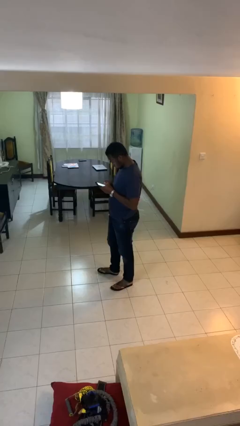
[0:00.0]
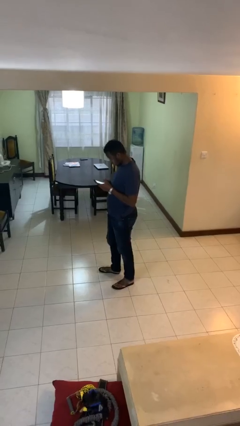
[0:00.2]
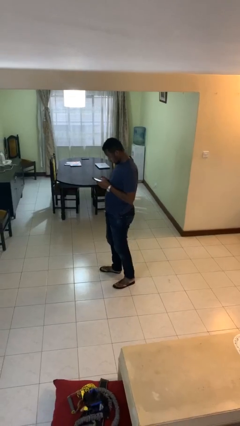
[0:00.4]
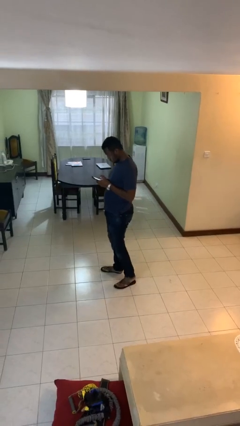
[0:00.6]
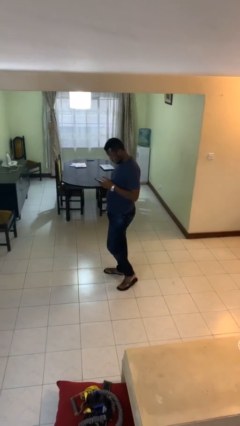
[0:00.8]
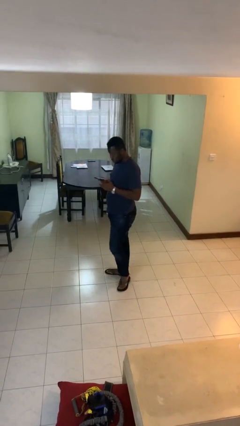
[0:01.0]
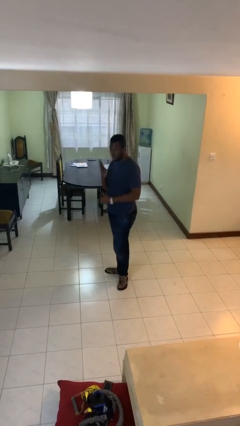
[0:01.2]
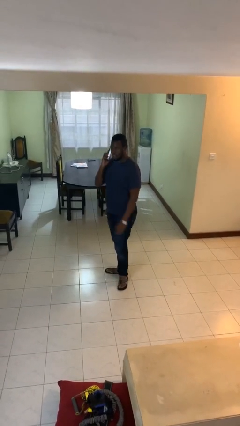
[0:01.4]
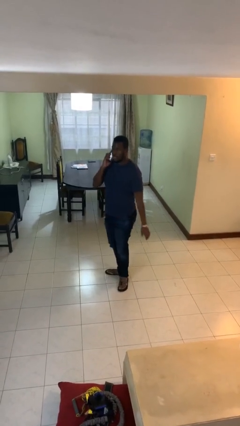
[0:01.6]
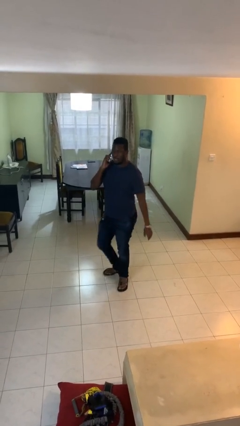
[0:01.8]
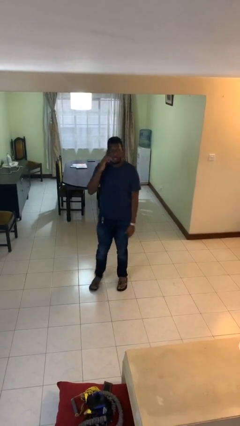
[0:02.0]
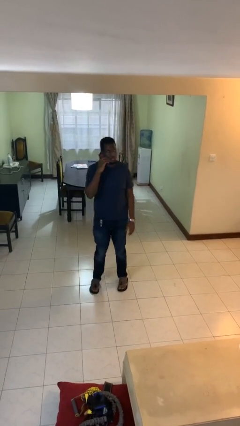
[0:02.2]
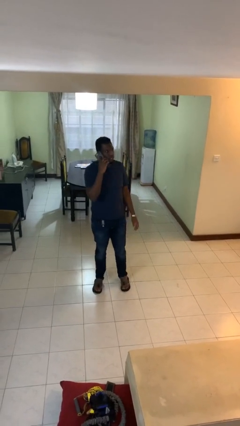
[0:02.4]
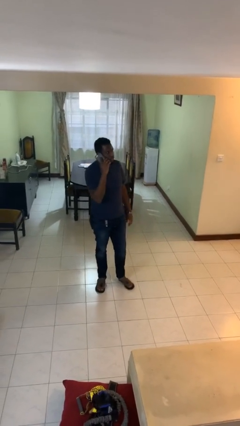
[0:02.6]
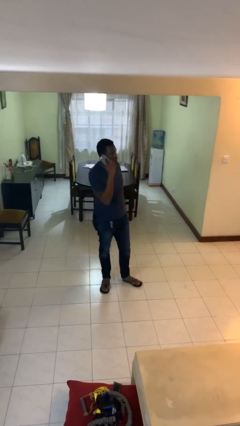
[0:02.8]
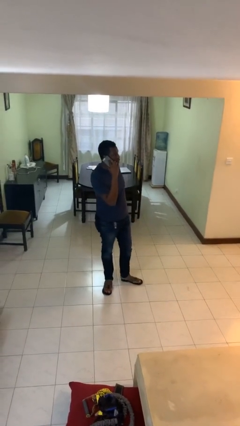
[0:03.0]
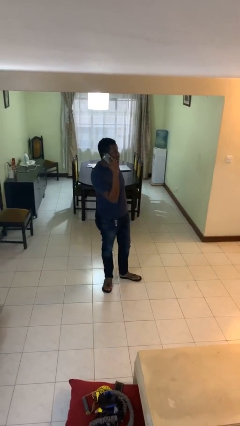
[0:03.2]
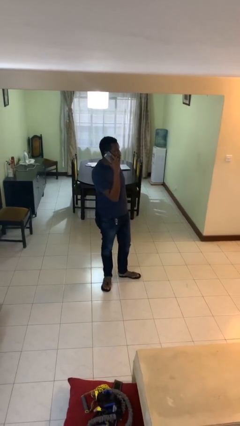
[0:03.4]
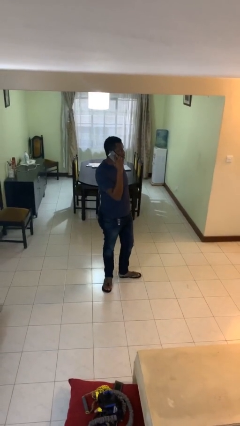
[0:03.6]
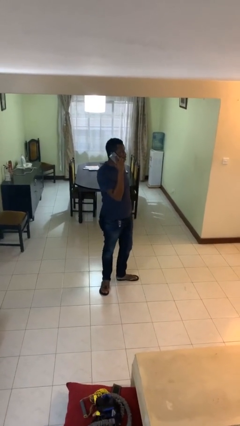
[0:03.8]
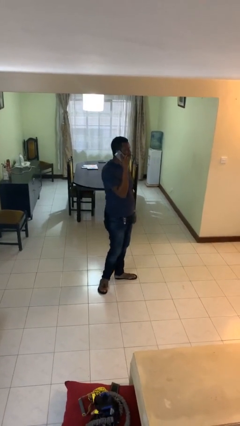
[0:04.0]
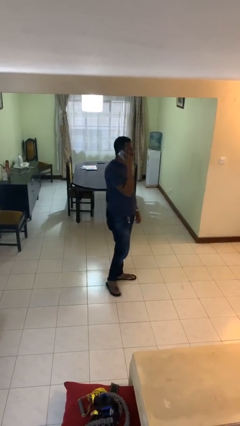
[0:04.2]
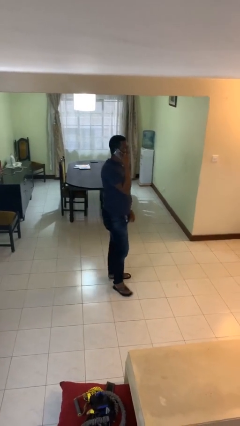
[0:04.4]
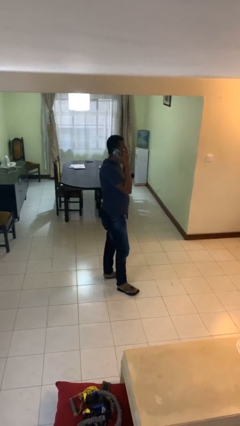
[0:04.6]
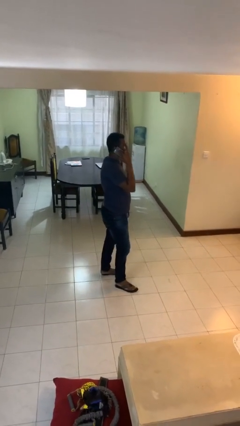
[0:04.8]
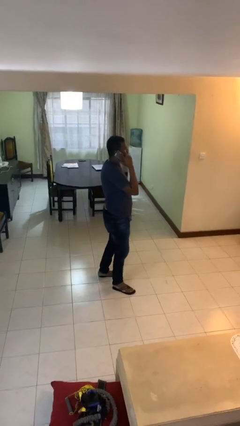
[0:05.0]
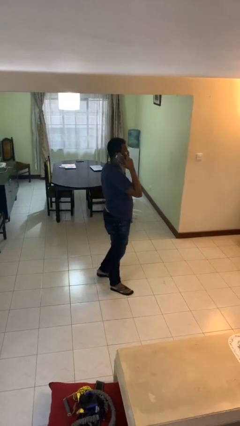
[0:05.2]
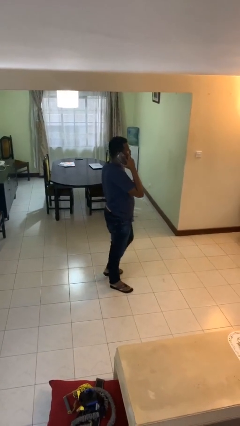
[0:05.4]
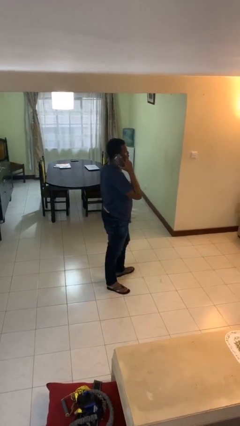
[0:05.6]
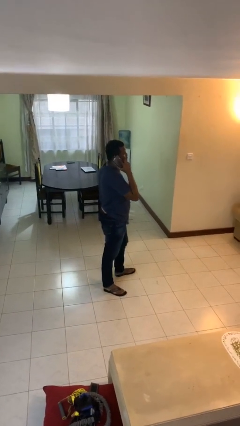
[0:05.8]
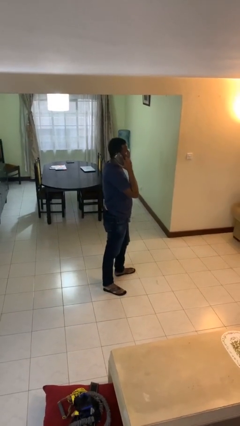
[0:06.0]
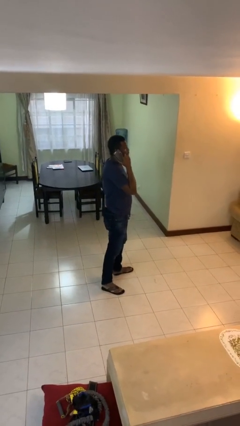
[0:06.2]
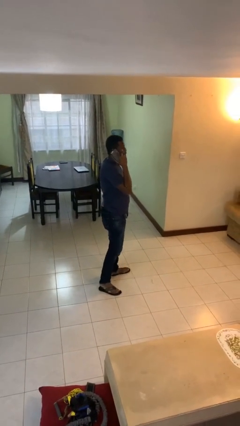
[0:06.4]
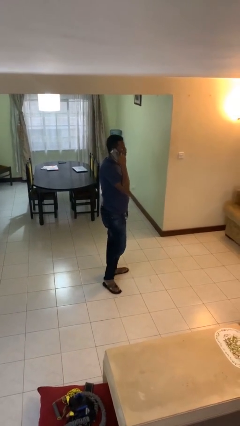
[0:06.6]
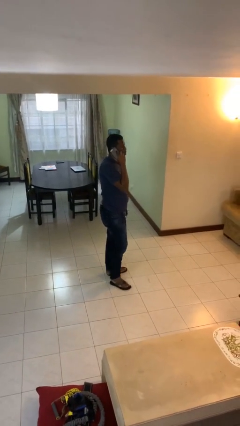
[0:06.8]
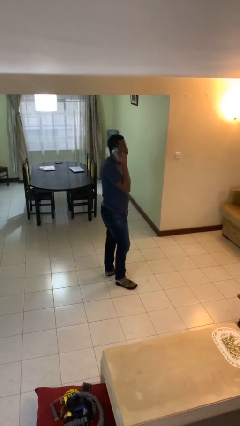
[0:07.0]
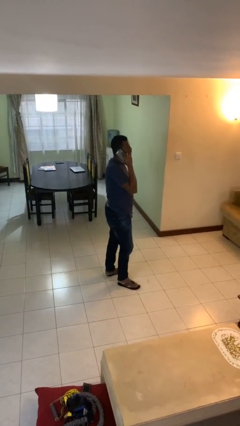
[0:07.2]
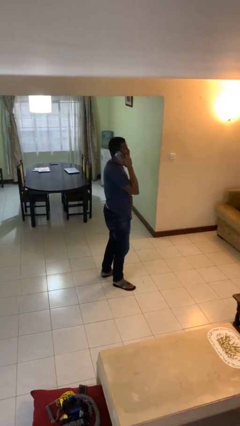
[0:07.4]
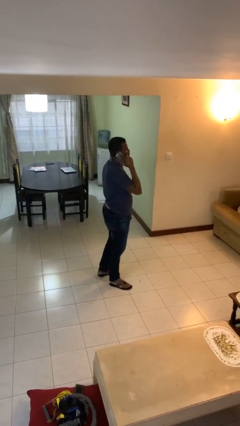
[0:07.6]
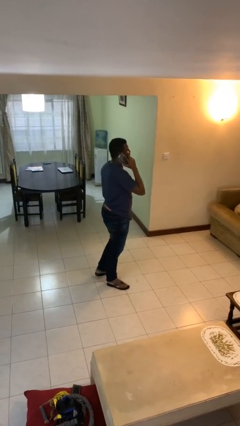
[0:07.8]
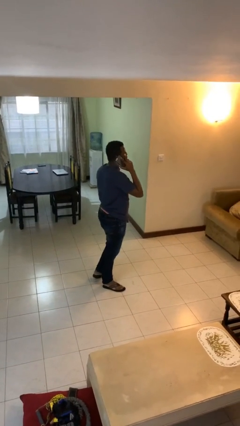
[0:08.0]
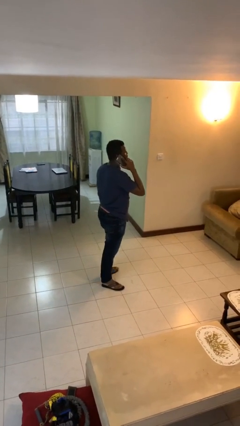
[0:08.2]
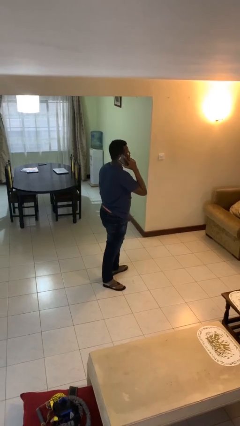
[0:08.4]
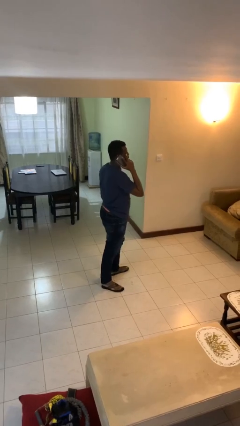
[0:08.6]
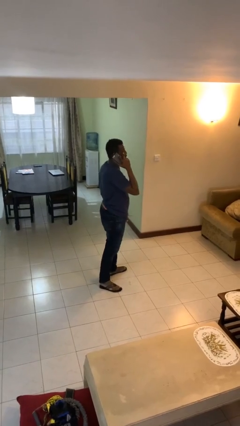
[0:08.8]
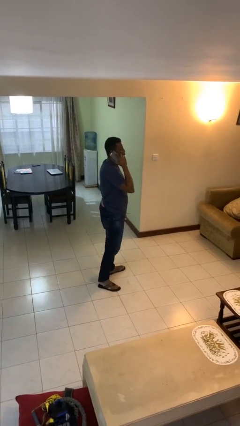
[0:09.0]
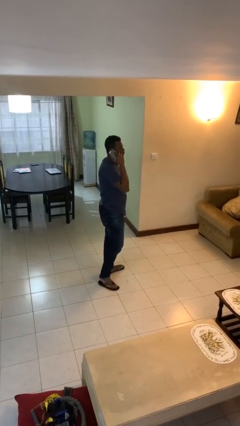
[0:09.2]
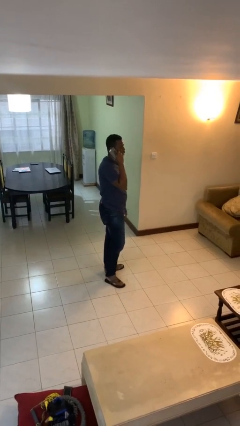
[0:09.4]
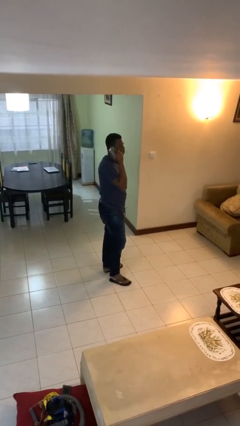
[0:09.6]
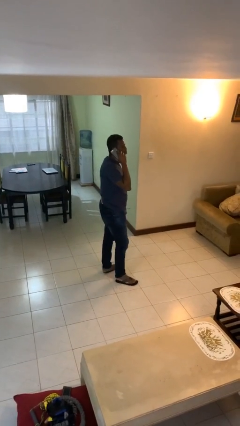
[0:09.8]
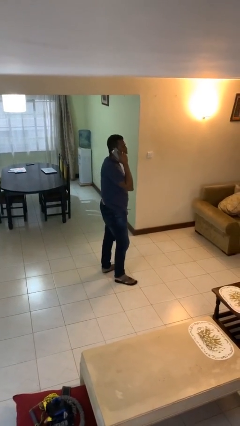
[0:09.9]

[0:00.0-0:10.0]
person talks on phone

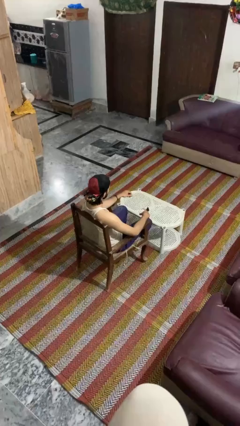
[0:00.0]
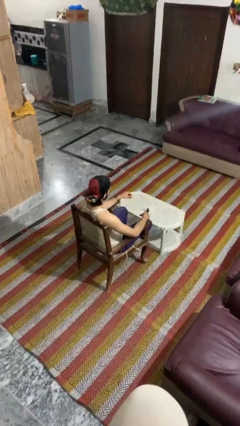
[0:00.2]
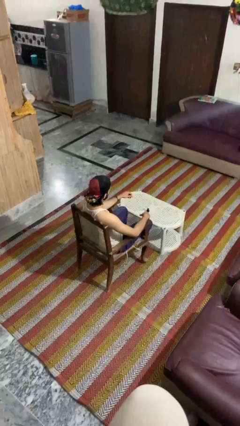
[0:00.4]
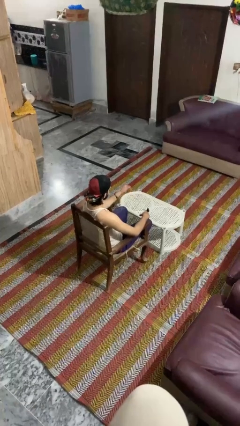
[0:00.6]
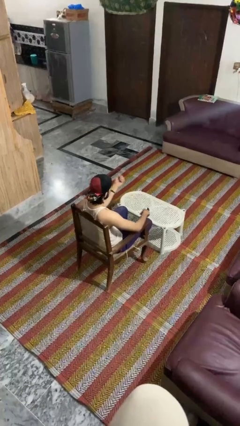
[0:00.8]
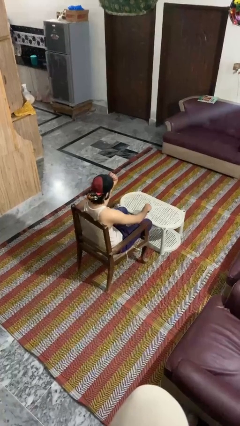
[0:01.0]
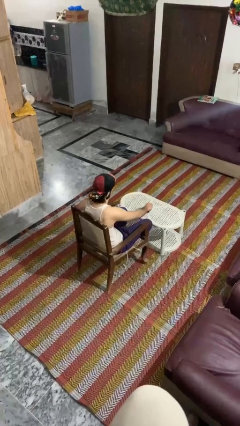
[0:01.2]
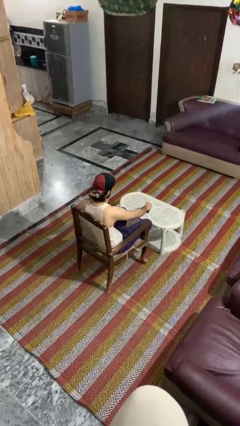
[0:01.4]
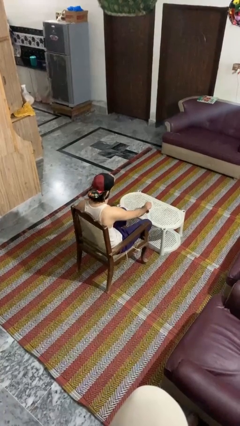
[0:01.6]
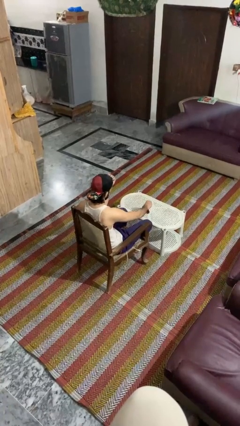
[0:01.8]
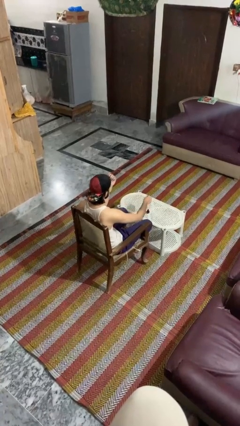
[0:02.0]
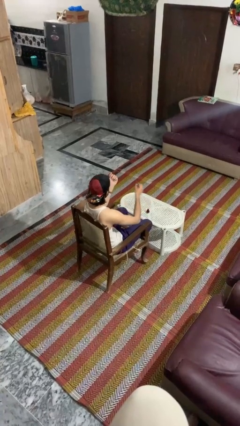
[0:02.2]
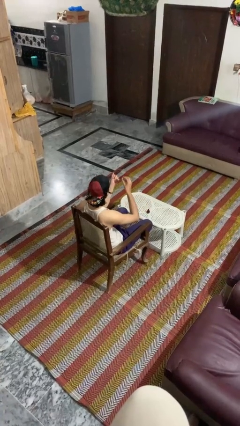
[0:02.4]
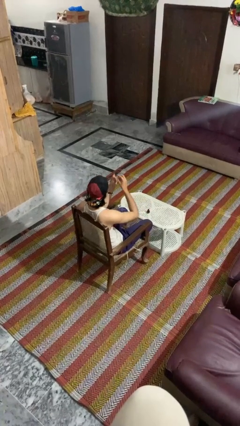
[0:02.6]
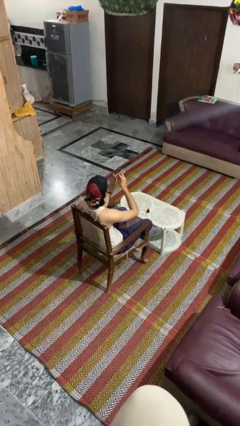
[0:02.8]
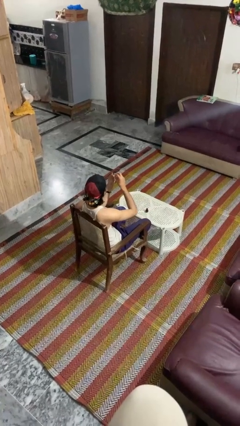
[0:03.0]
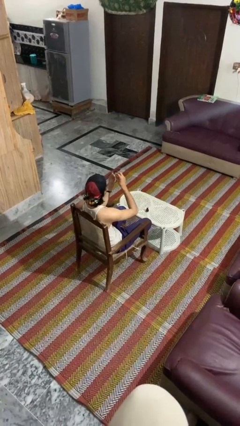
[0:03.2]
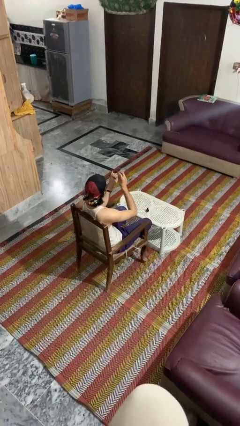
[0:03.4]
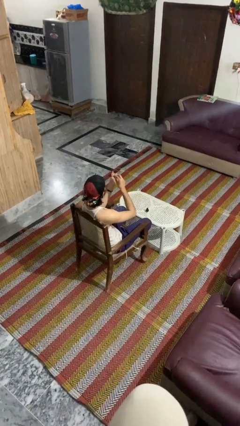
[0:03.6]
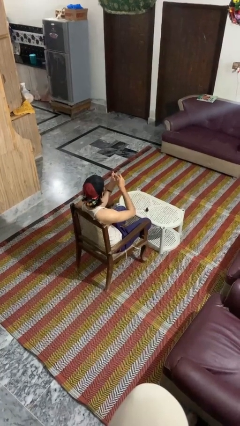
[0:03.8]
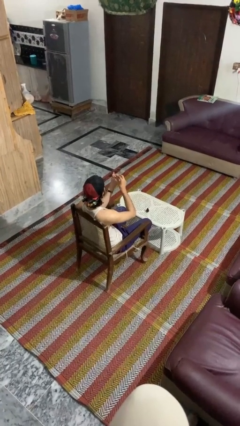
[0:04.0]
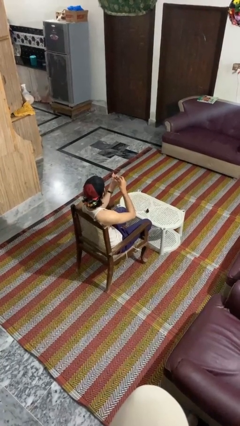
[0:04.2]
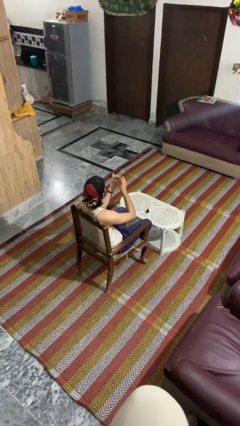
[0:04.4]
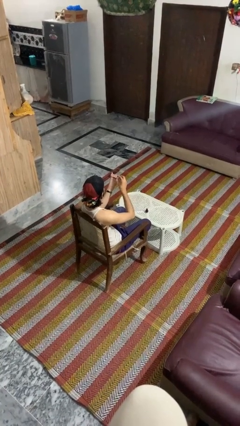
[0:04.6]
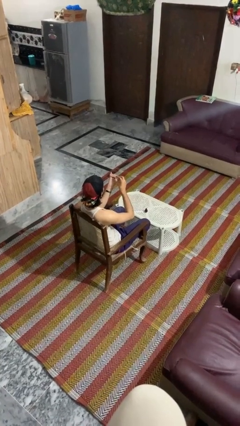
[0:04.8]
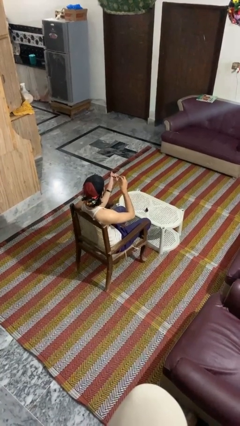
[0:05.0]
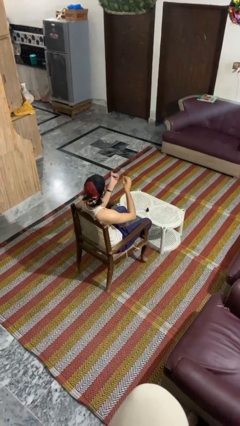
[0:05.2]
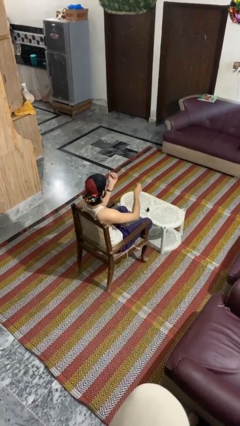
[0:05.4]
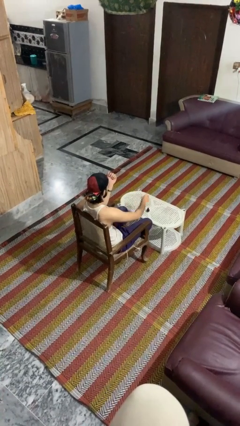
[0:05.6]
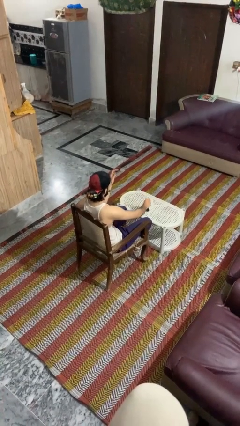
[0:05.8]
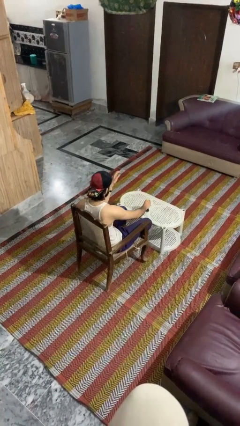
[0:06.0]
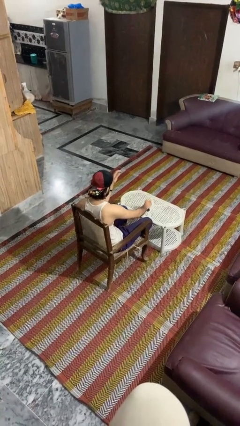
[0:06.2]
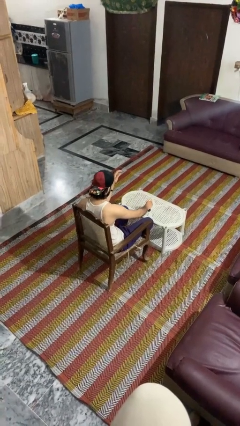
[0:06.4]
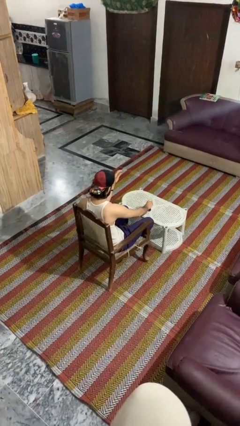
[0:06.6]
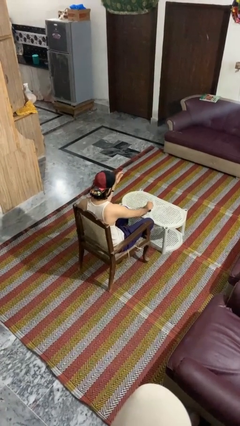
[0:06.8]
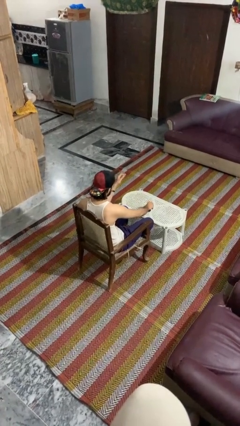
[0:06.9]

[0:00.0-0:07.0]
person paints fingernails

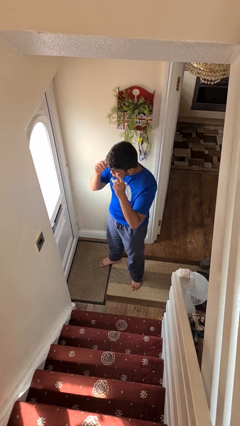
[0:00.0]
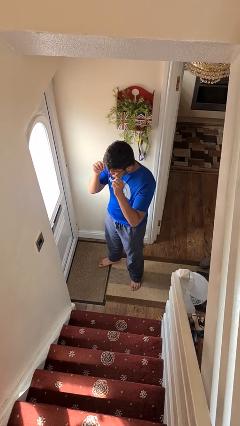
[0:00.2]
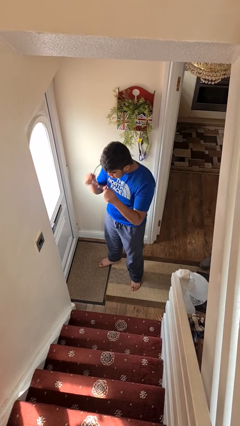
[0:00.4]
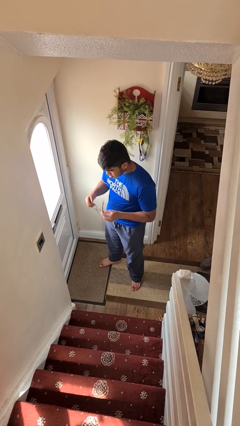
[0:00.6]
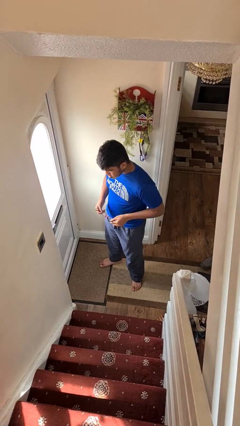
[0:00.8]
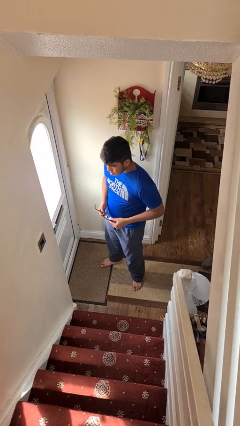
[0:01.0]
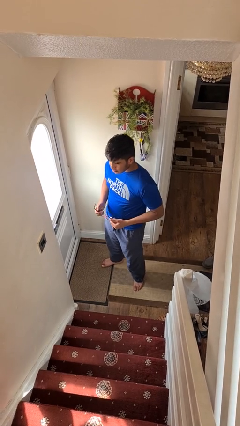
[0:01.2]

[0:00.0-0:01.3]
person takes off glasses
